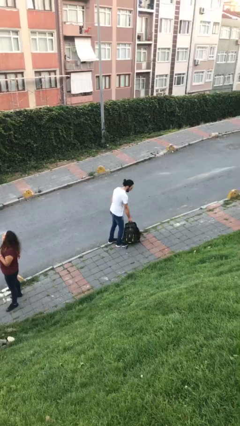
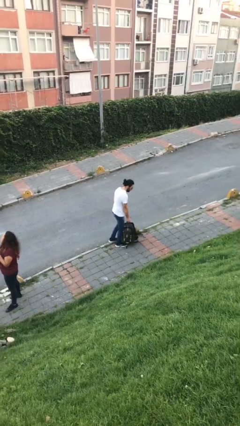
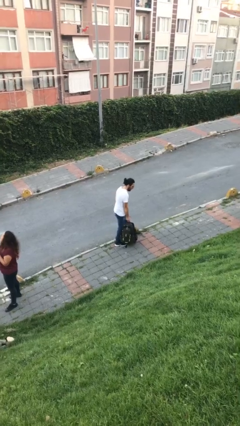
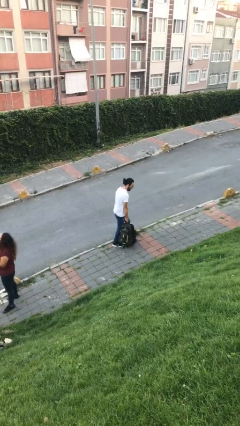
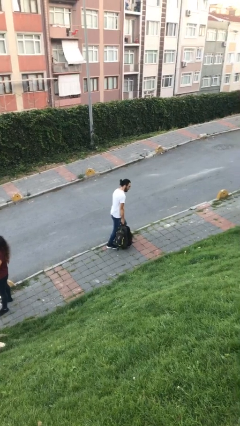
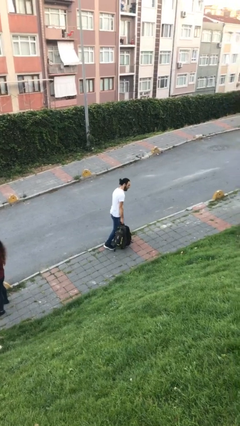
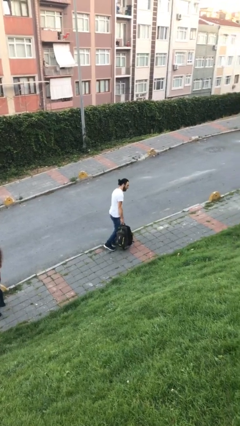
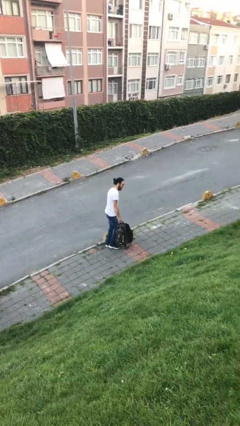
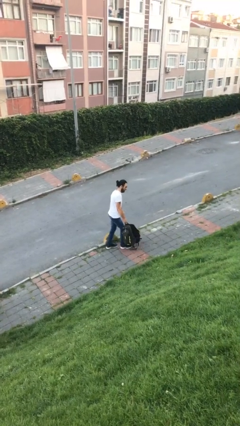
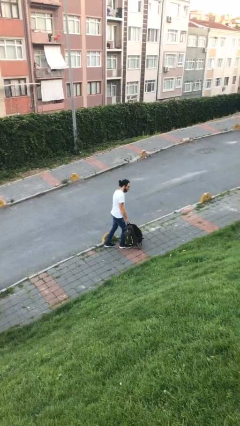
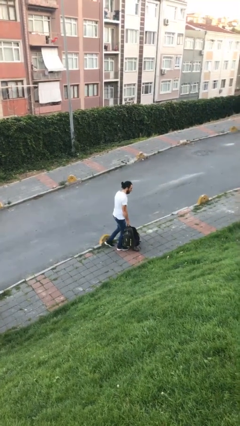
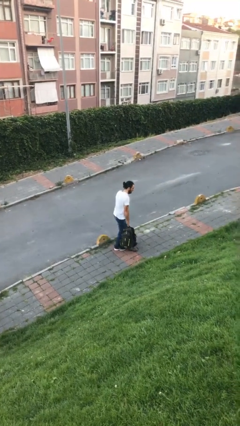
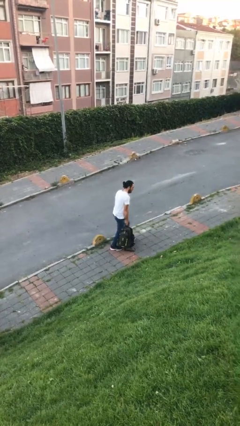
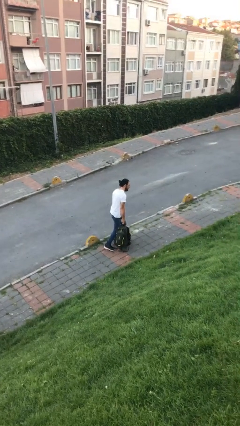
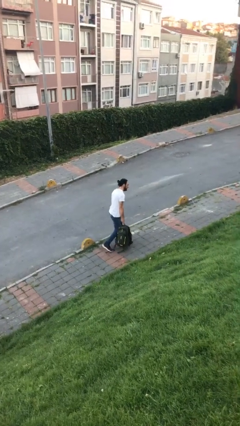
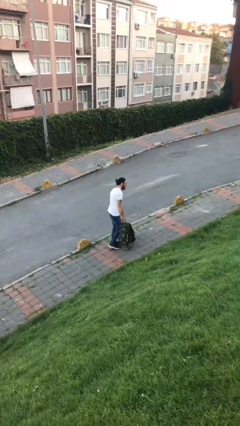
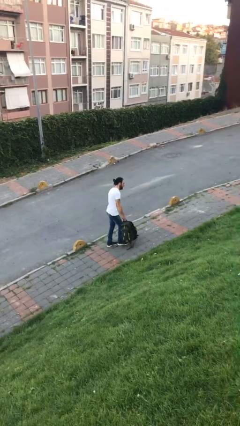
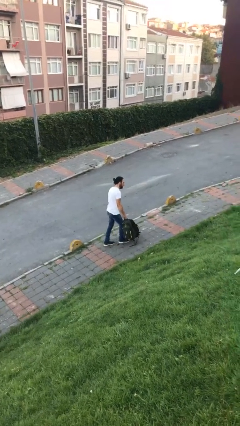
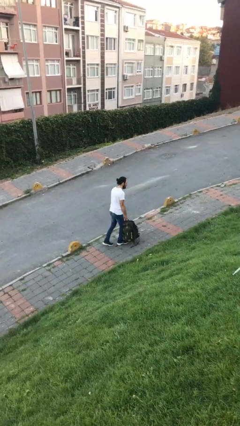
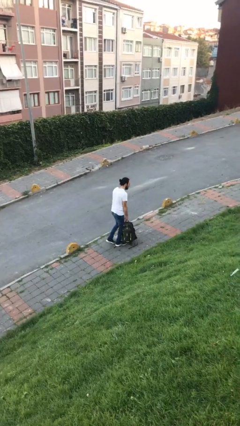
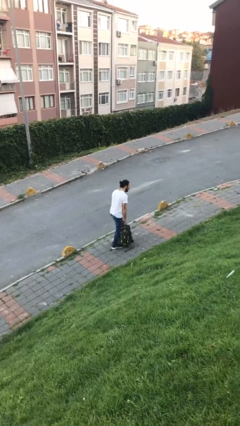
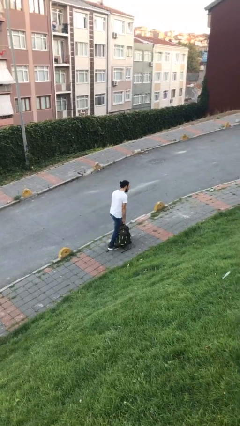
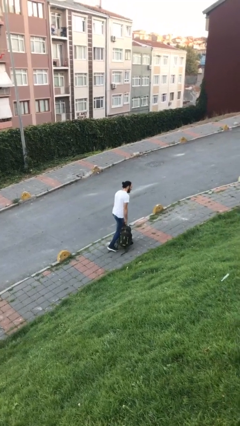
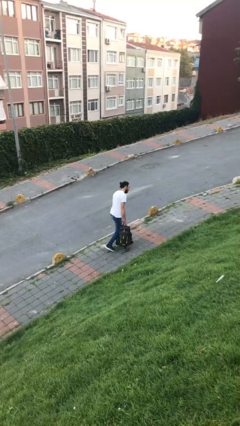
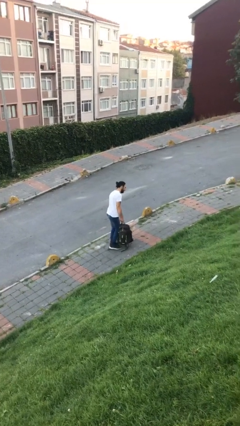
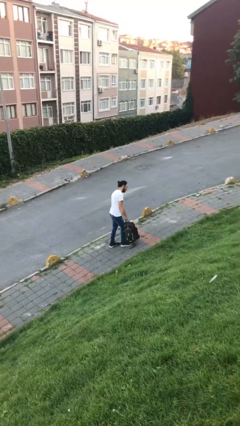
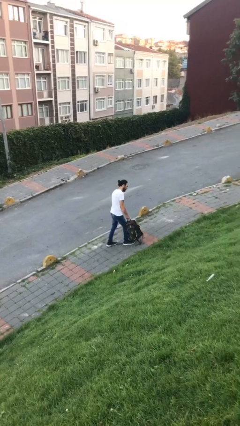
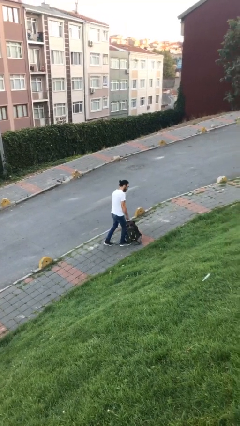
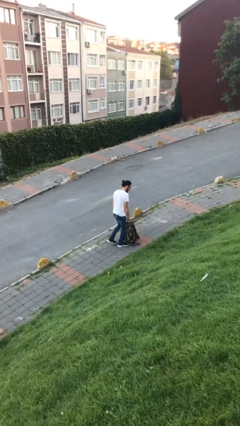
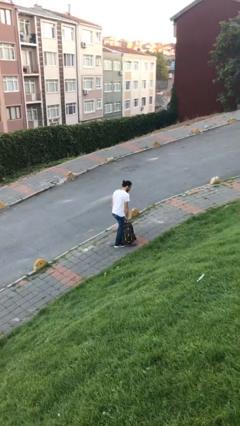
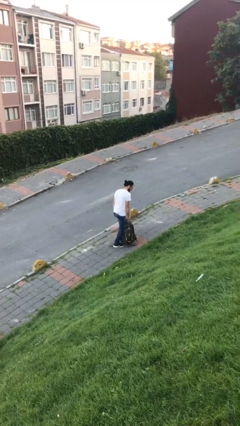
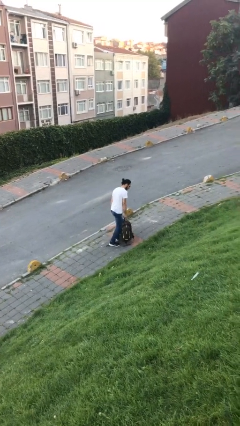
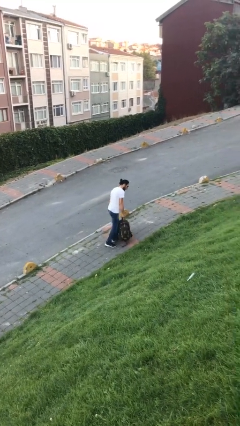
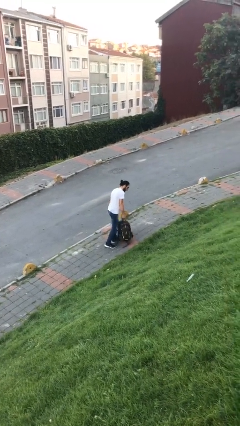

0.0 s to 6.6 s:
person carries heavy object

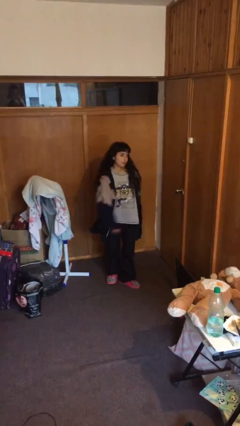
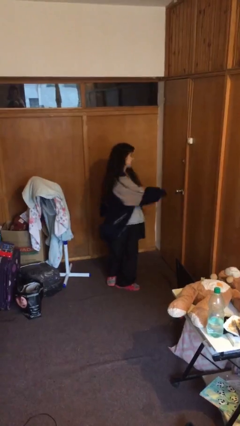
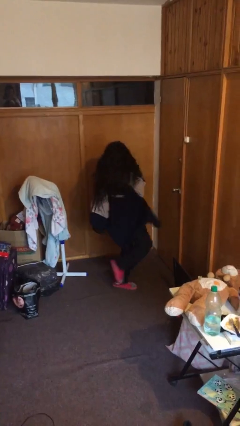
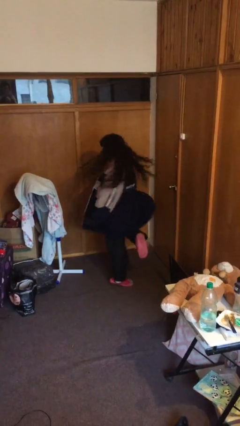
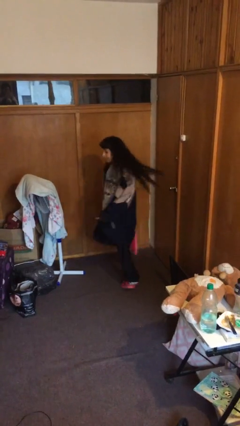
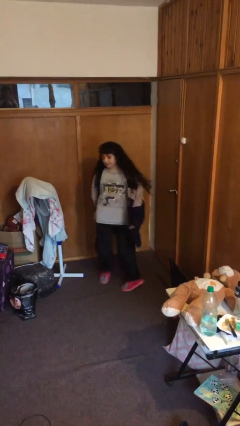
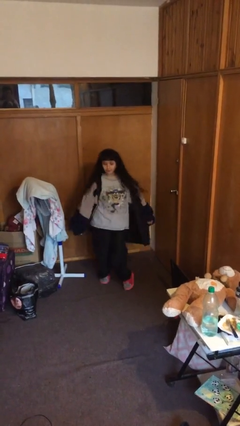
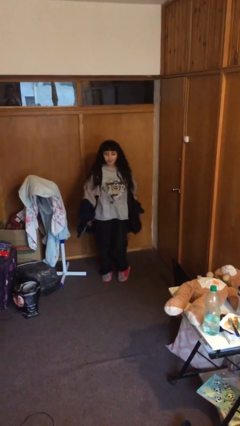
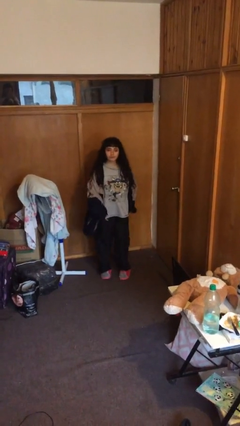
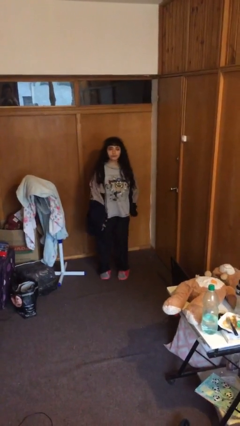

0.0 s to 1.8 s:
person twirls

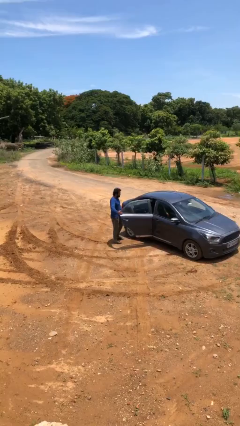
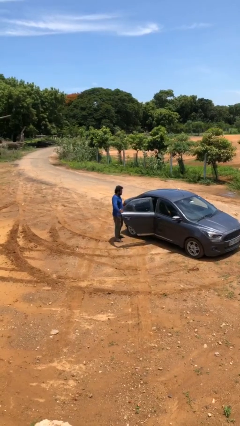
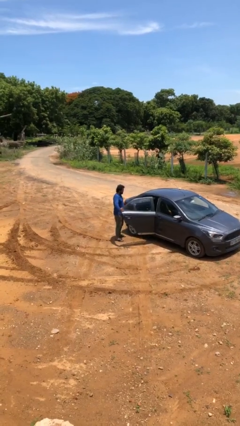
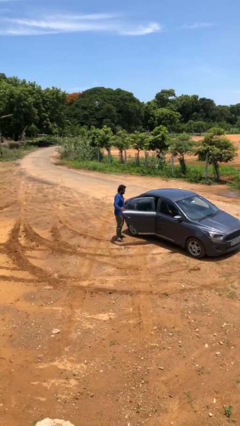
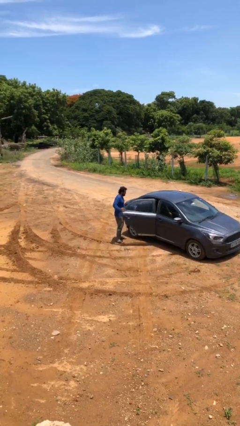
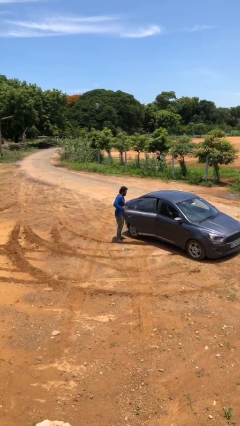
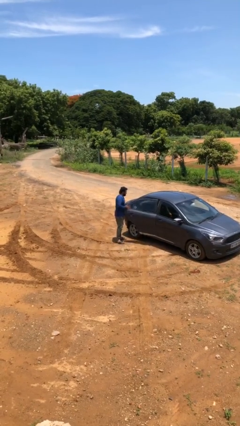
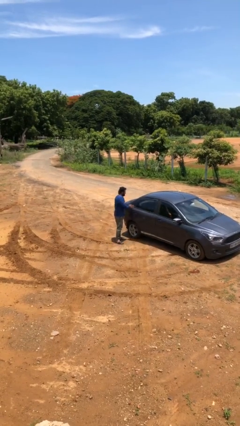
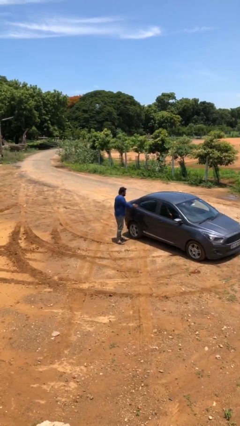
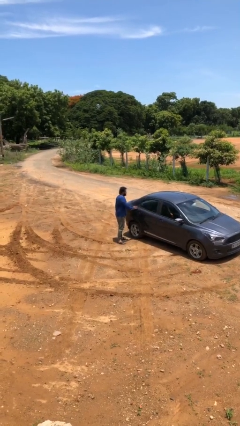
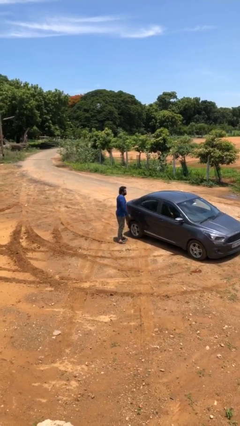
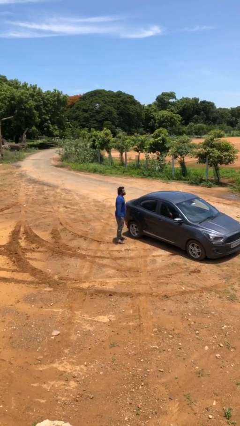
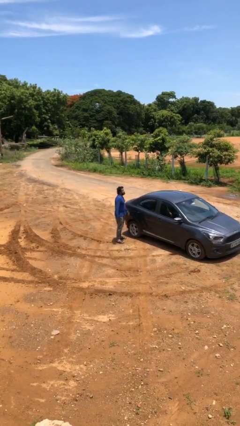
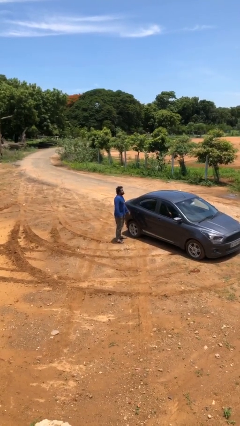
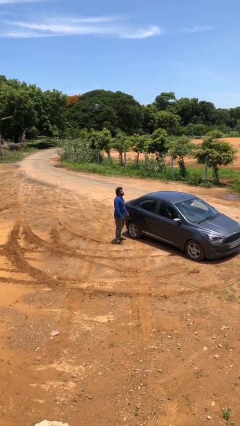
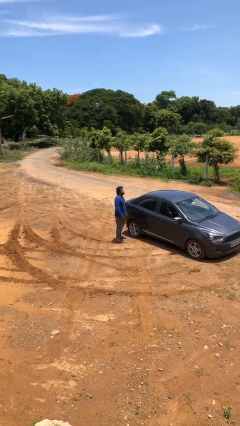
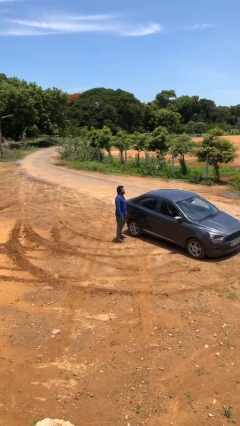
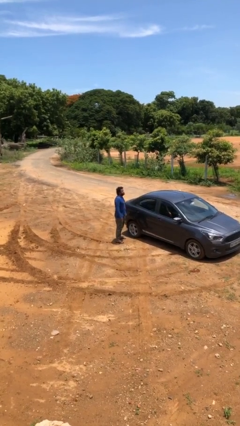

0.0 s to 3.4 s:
person closes car door

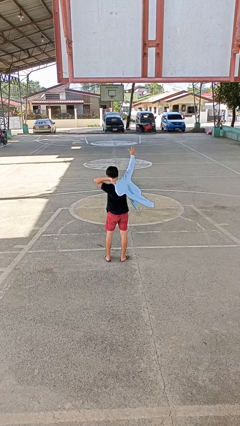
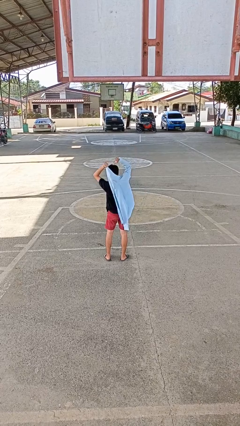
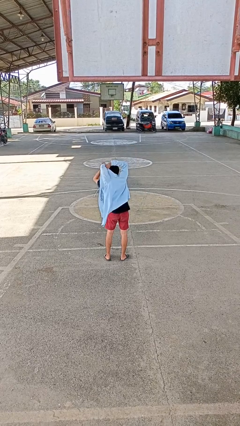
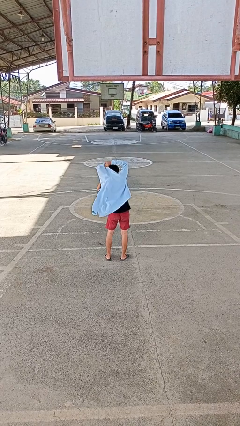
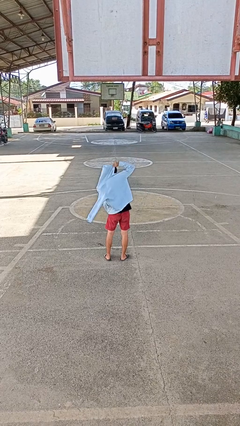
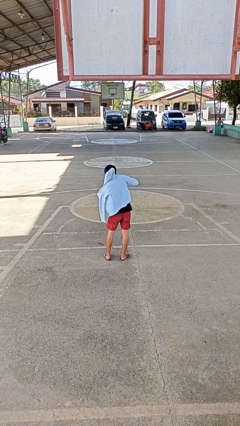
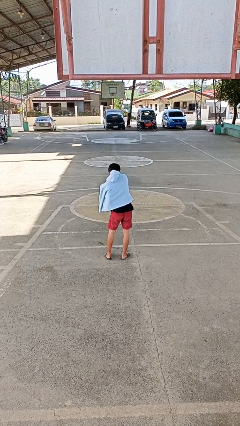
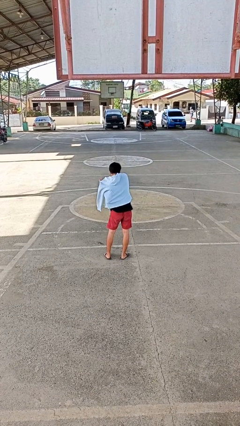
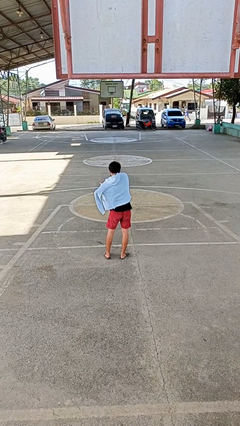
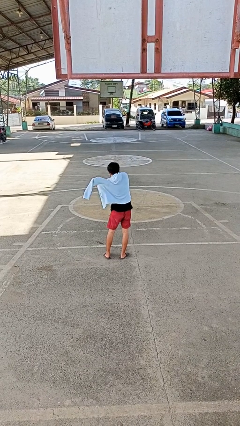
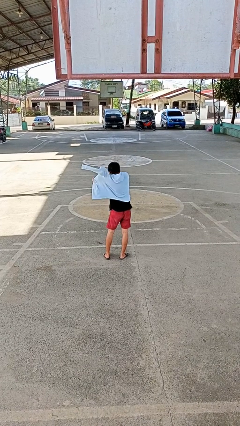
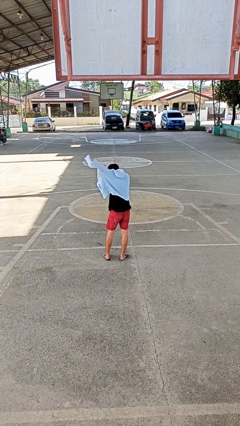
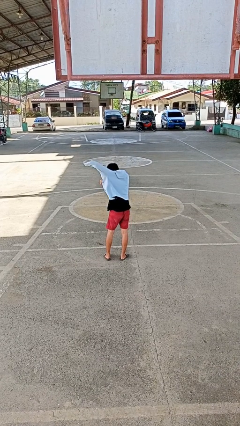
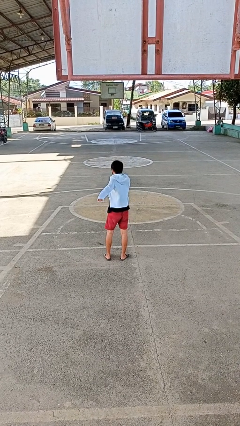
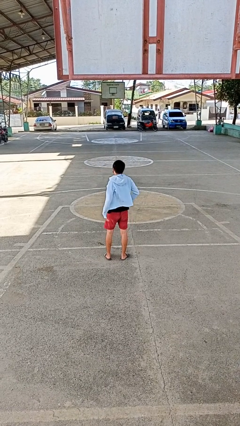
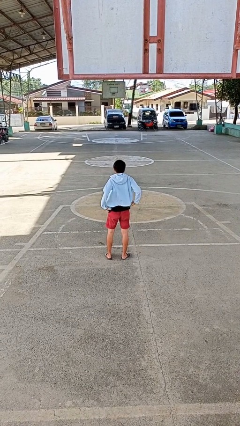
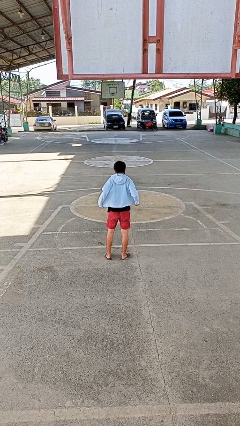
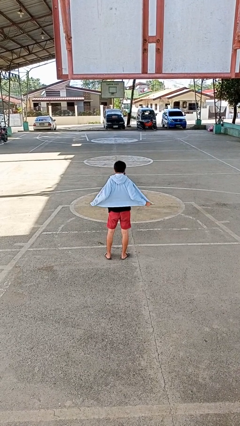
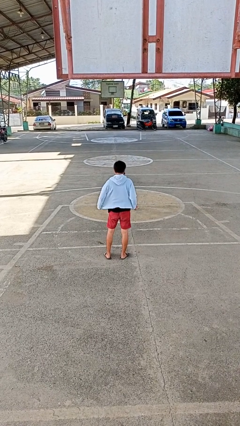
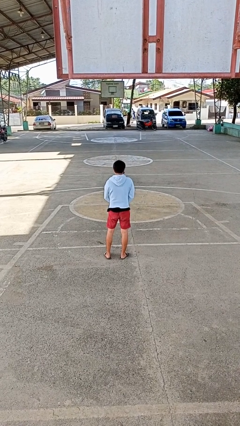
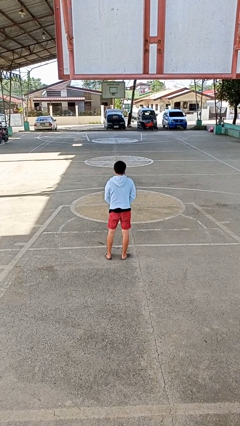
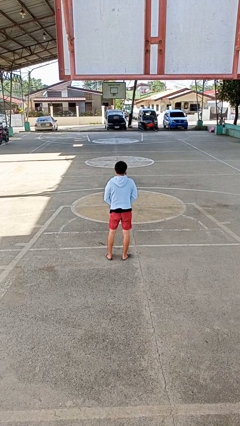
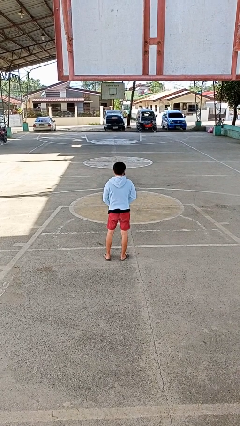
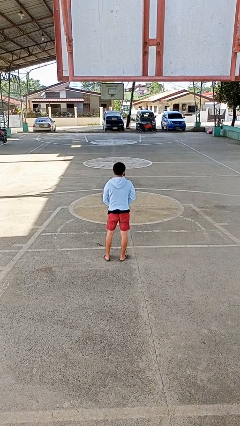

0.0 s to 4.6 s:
person puts on jacket

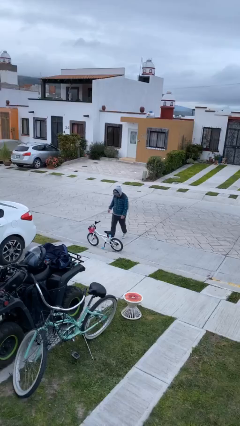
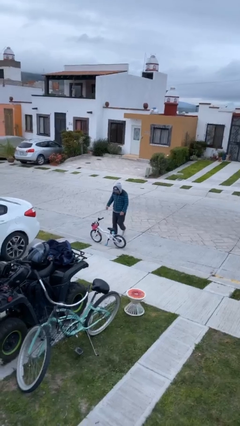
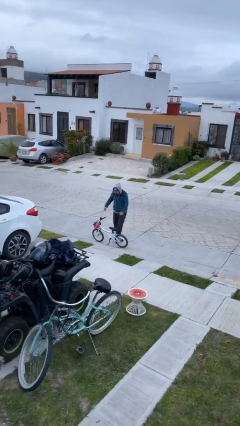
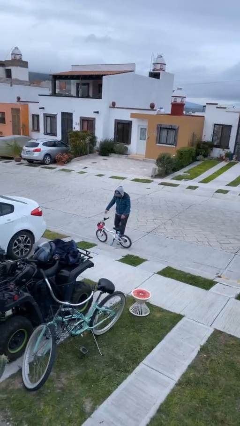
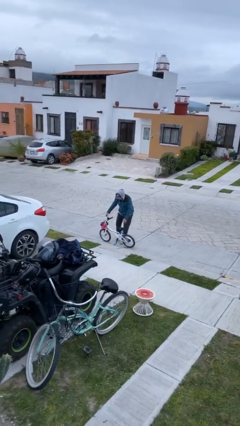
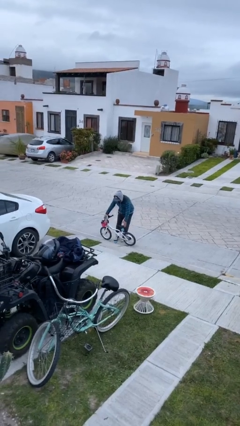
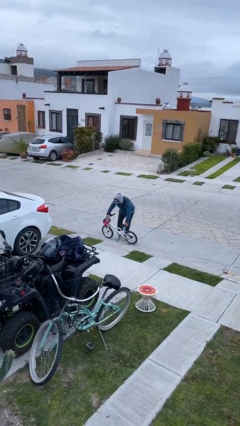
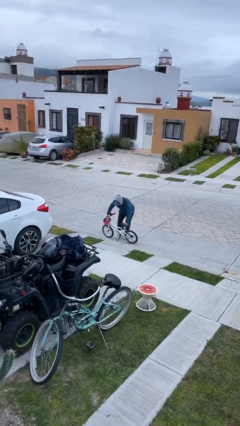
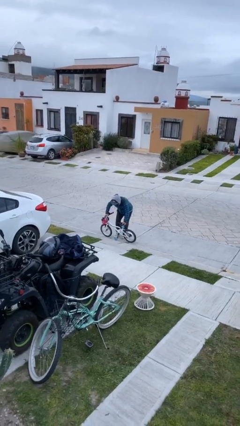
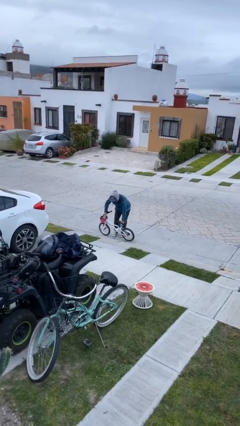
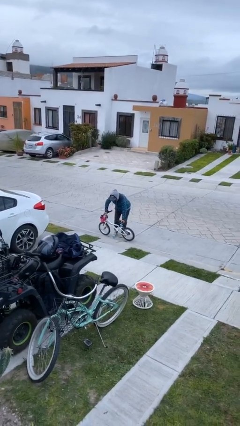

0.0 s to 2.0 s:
person picks up object from floor
